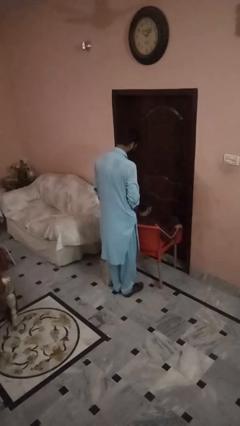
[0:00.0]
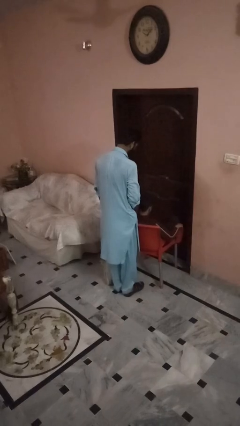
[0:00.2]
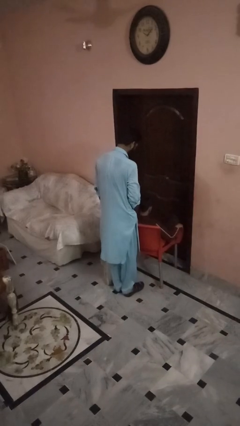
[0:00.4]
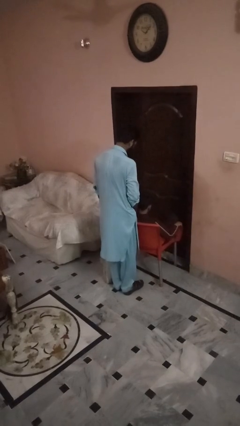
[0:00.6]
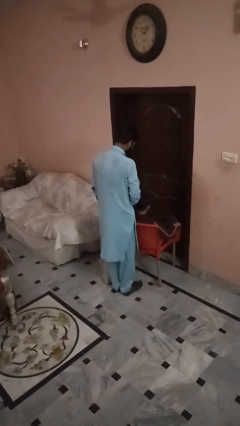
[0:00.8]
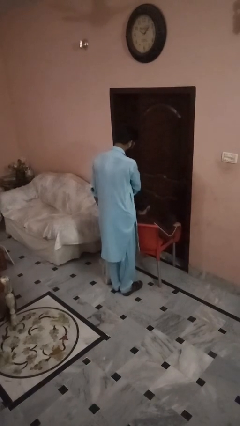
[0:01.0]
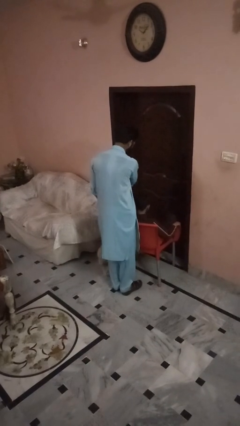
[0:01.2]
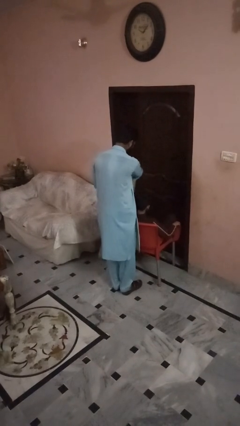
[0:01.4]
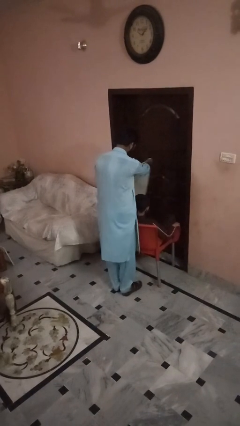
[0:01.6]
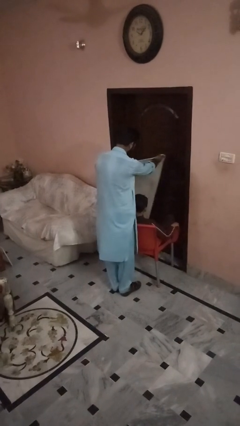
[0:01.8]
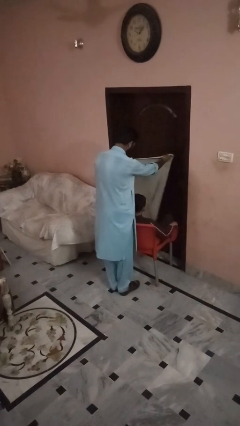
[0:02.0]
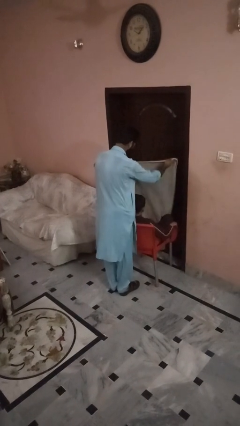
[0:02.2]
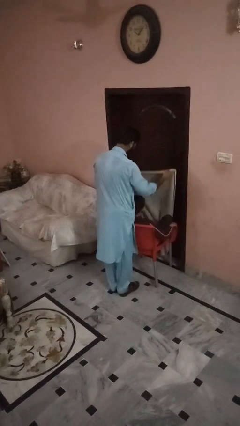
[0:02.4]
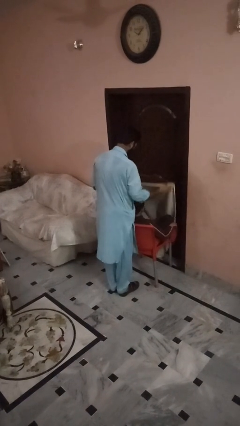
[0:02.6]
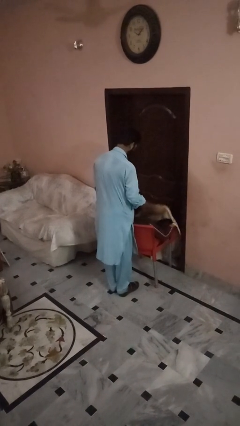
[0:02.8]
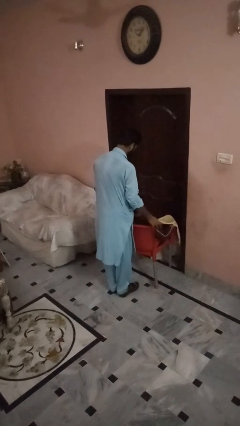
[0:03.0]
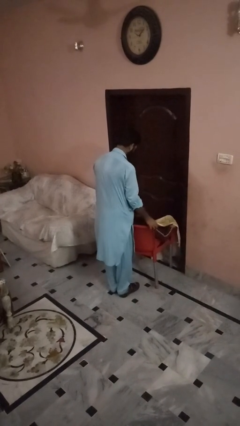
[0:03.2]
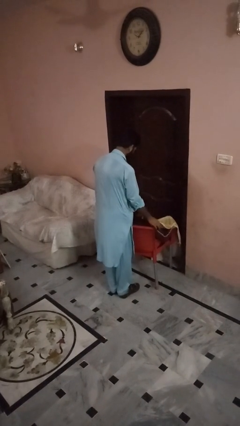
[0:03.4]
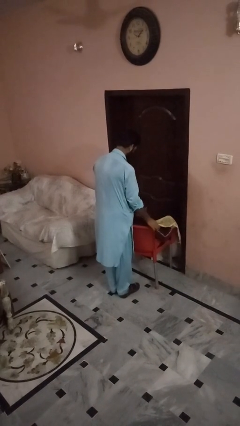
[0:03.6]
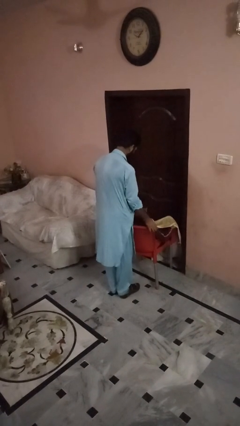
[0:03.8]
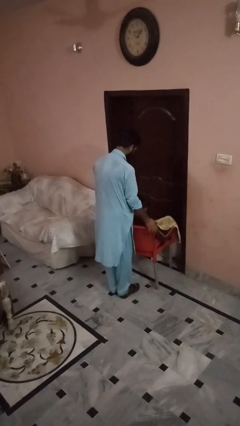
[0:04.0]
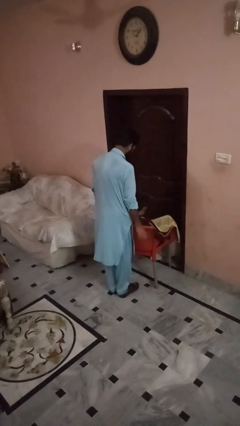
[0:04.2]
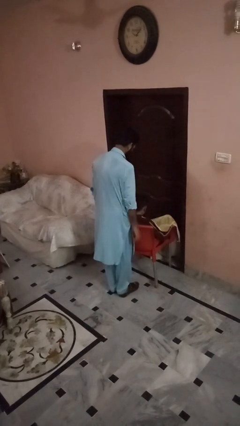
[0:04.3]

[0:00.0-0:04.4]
person covers friend with blanket

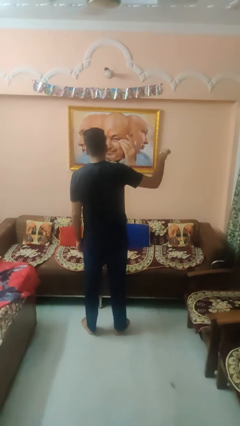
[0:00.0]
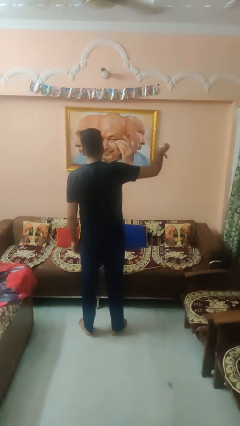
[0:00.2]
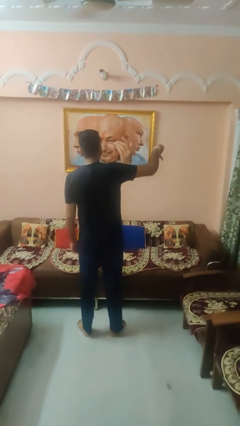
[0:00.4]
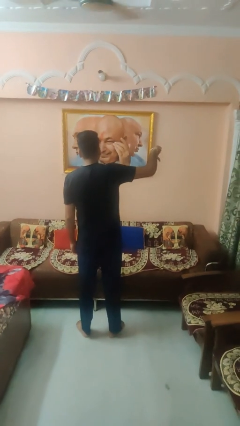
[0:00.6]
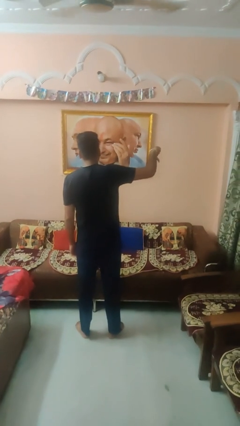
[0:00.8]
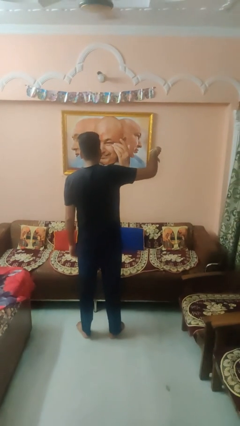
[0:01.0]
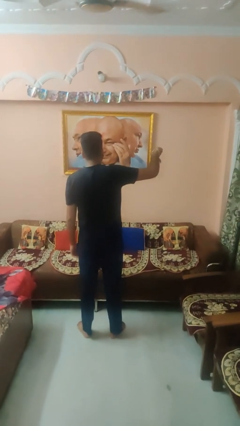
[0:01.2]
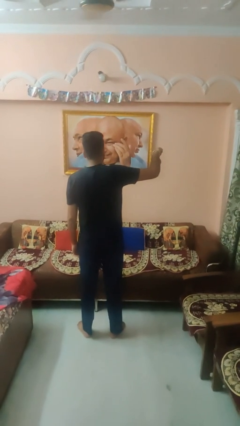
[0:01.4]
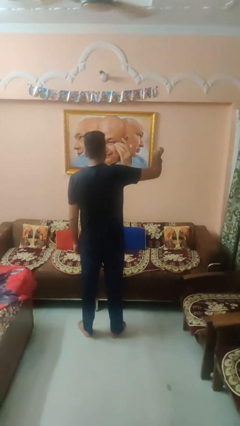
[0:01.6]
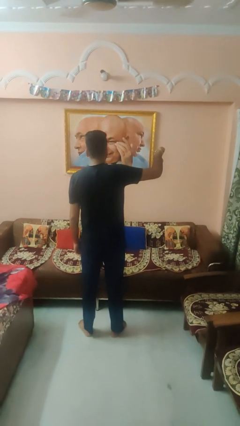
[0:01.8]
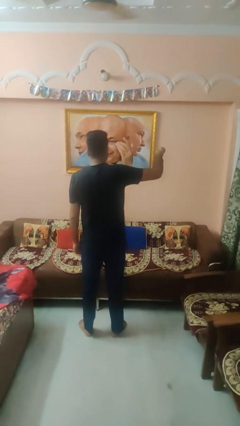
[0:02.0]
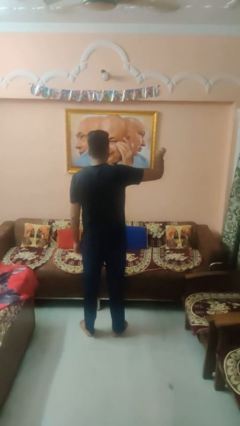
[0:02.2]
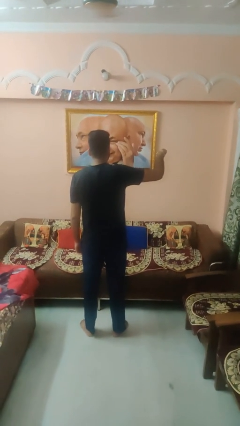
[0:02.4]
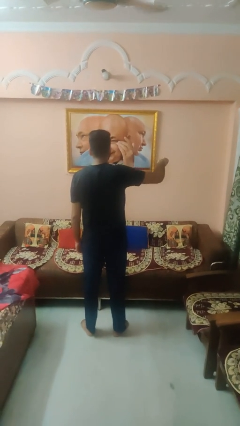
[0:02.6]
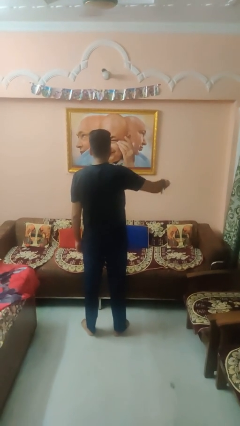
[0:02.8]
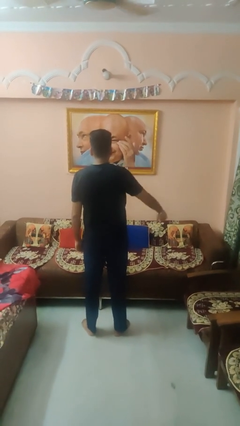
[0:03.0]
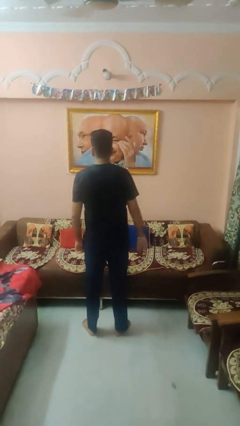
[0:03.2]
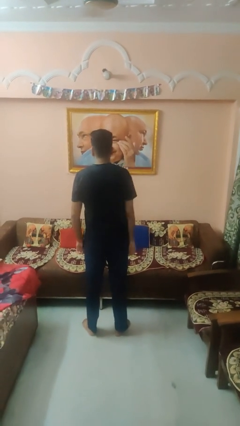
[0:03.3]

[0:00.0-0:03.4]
person gestures thumbs down

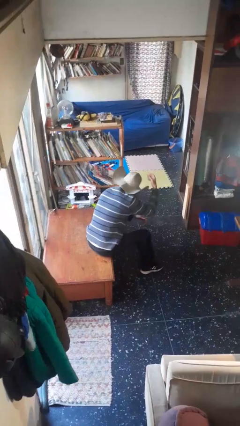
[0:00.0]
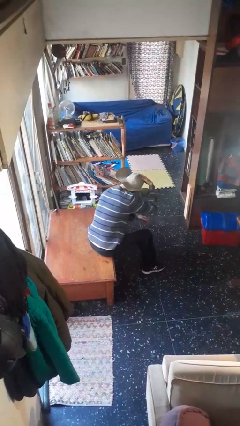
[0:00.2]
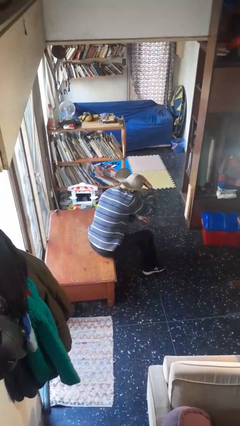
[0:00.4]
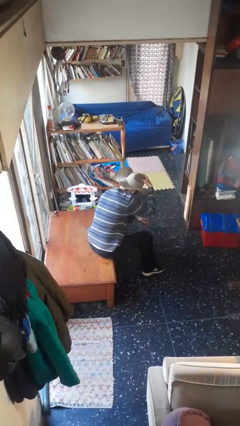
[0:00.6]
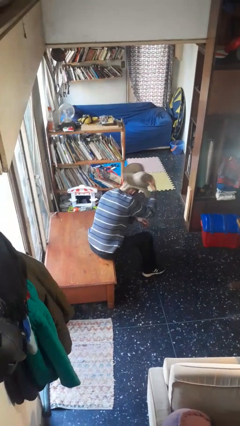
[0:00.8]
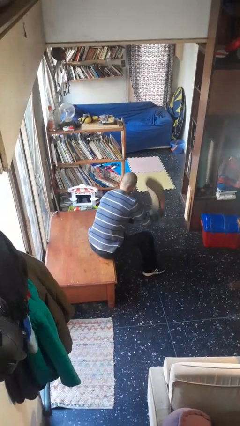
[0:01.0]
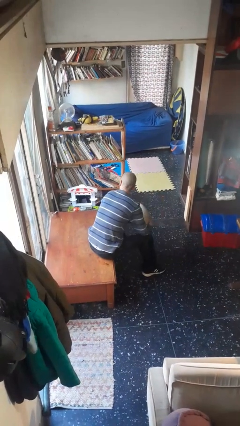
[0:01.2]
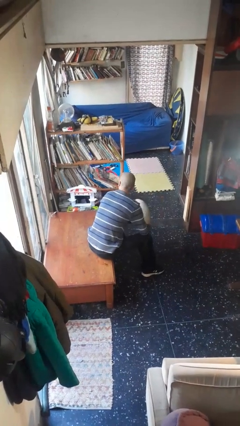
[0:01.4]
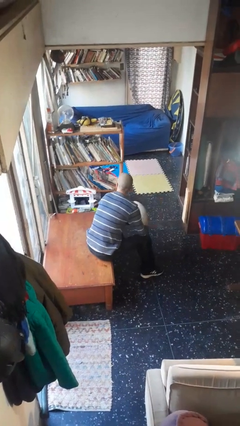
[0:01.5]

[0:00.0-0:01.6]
person takes off hat

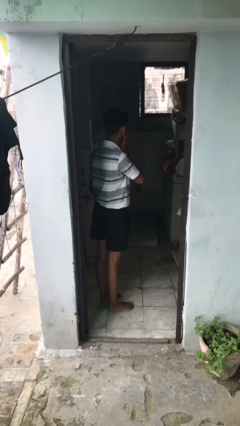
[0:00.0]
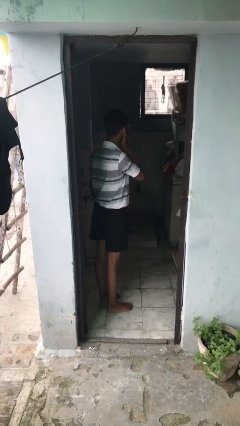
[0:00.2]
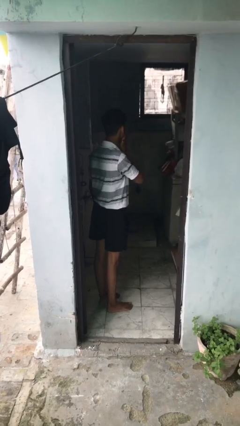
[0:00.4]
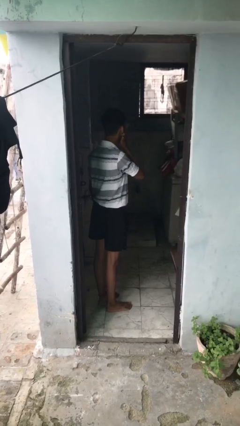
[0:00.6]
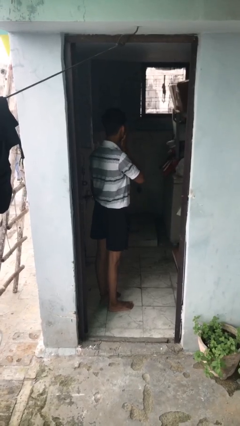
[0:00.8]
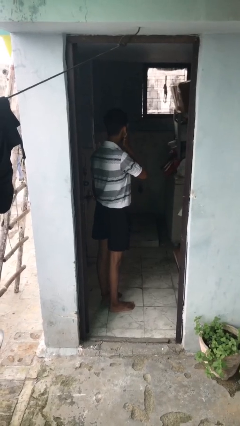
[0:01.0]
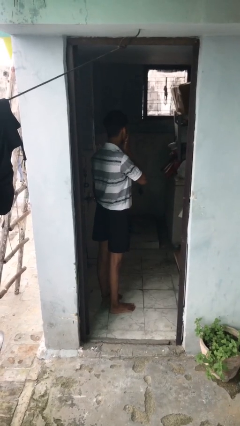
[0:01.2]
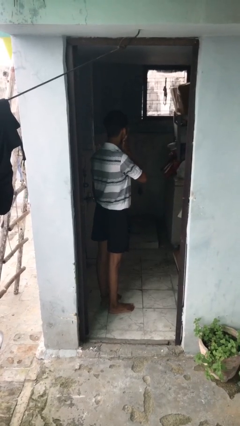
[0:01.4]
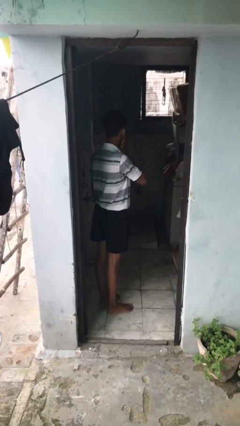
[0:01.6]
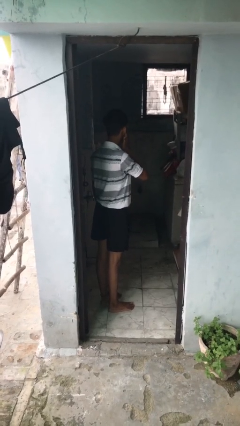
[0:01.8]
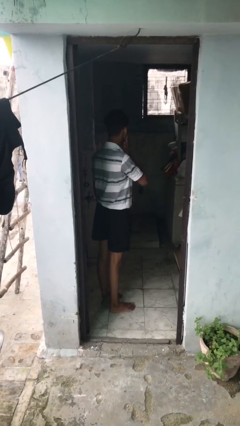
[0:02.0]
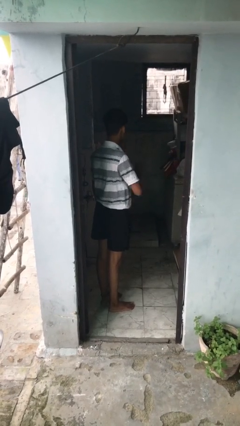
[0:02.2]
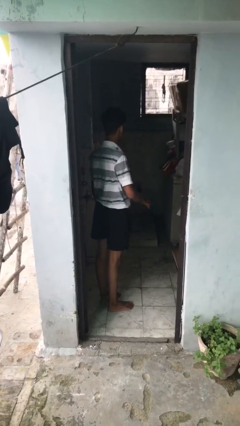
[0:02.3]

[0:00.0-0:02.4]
person applies shaving cream

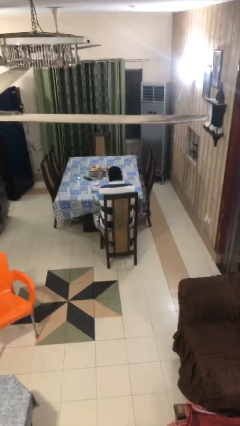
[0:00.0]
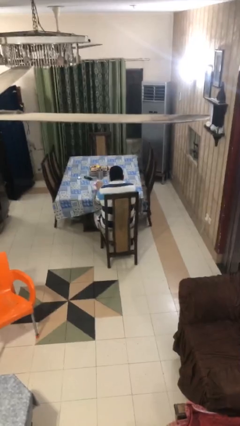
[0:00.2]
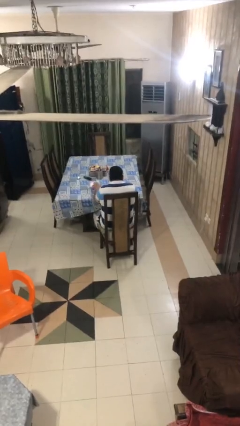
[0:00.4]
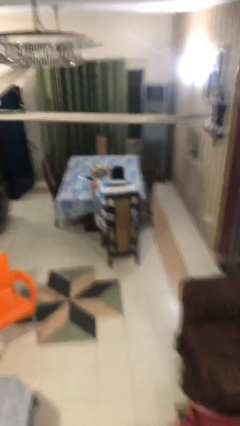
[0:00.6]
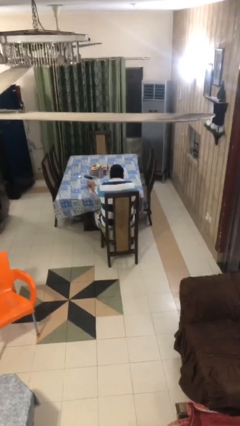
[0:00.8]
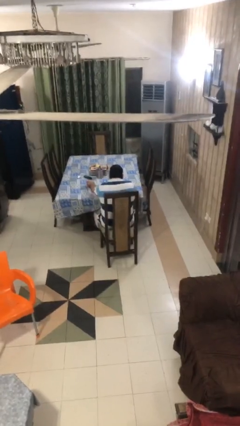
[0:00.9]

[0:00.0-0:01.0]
person knocks over glass

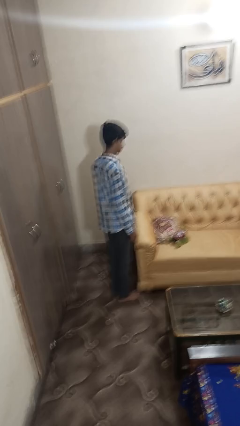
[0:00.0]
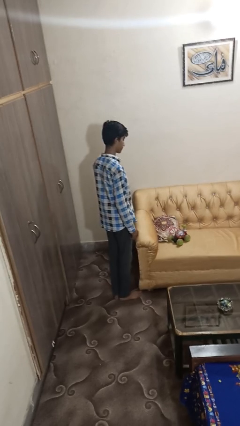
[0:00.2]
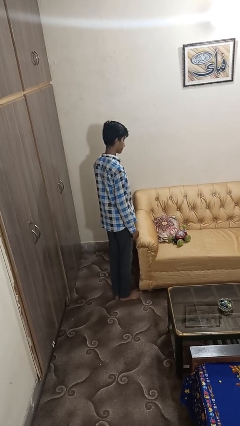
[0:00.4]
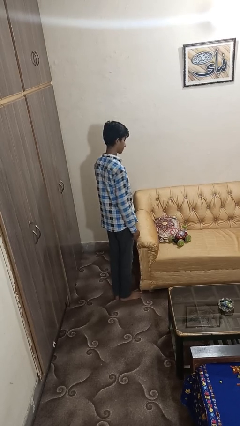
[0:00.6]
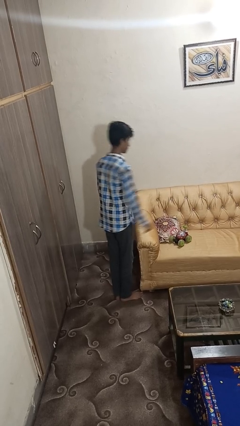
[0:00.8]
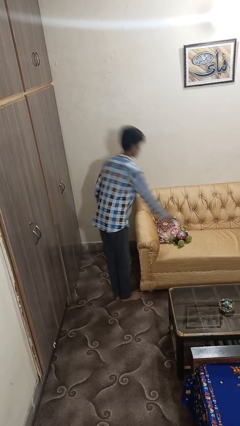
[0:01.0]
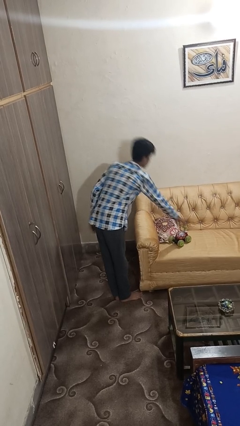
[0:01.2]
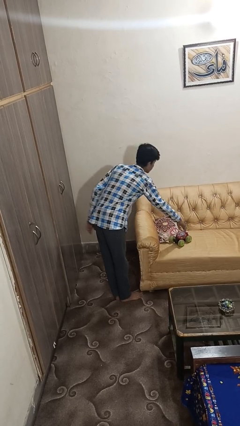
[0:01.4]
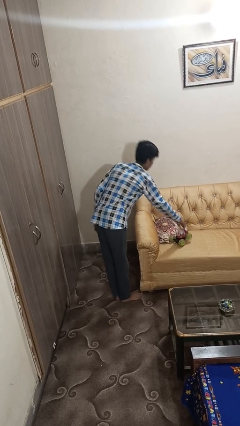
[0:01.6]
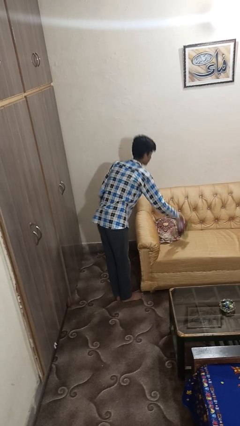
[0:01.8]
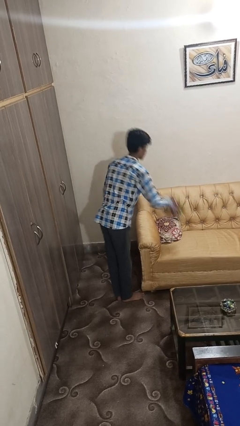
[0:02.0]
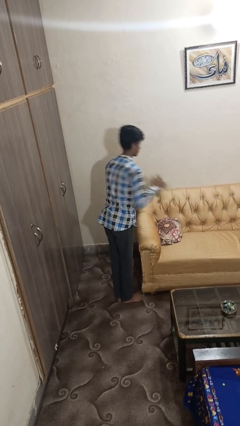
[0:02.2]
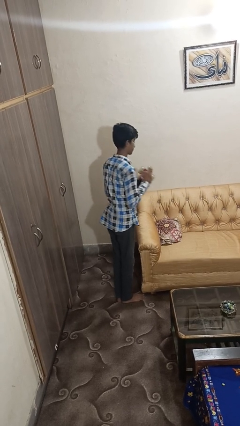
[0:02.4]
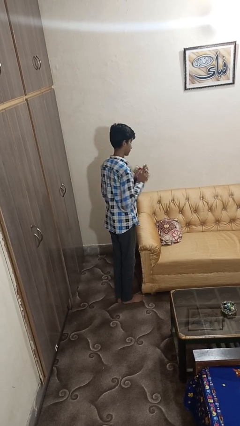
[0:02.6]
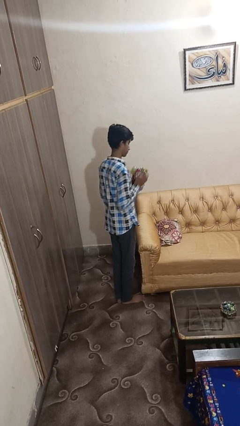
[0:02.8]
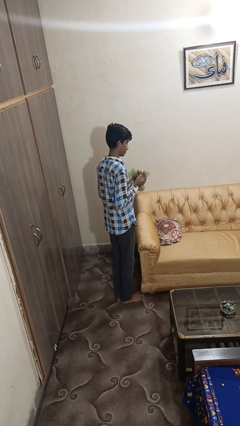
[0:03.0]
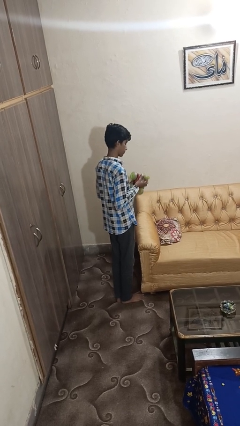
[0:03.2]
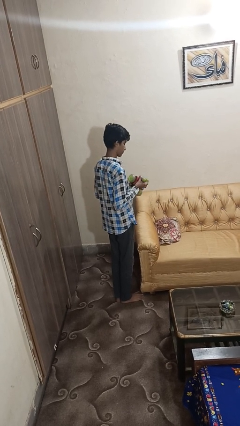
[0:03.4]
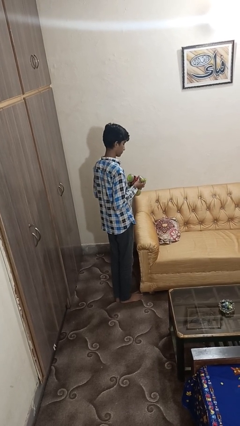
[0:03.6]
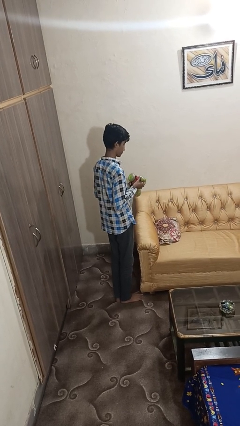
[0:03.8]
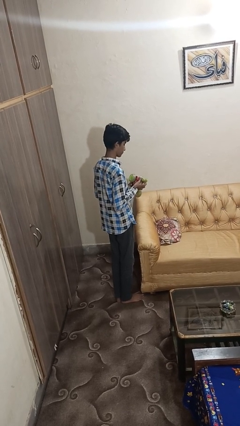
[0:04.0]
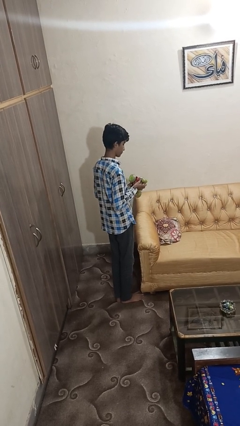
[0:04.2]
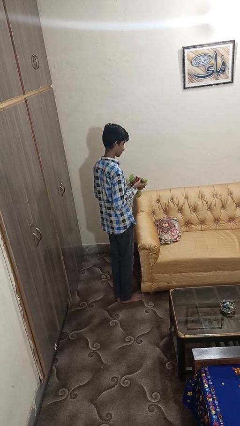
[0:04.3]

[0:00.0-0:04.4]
person picks up object from couch

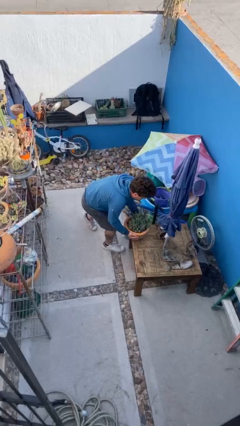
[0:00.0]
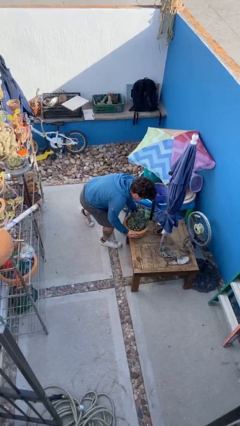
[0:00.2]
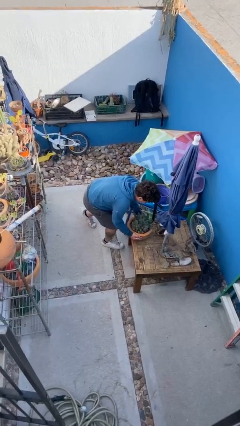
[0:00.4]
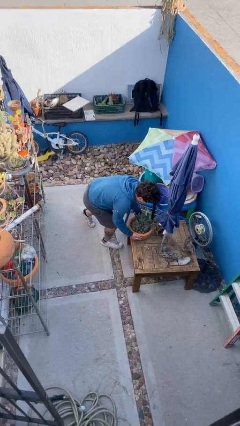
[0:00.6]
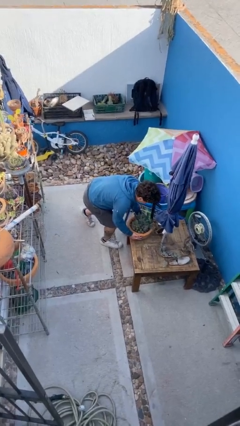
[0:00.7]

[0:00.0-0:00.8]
person puts down object on table
